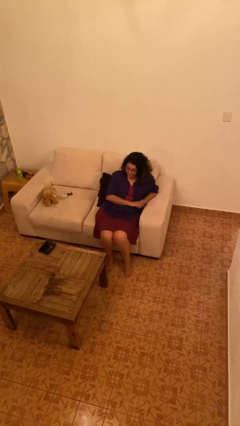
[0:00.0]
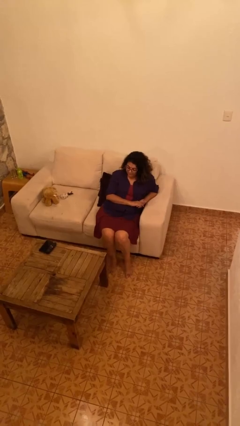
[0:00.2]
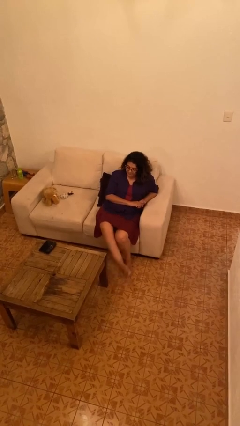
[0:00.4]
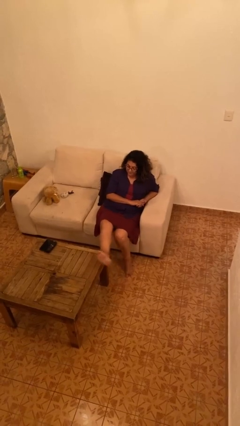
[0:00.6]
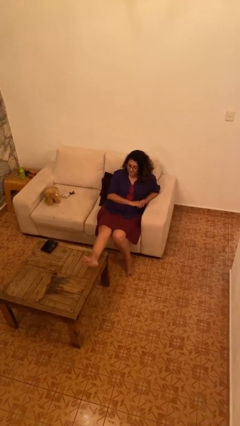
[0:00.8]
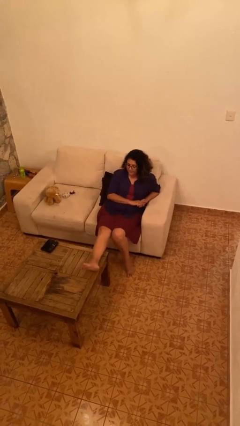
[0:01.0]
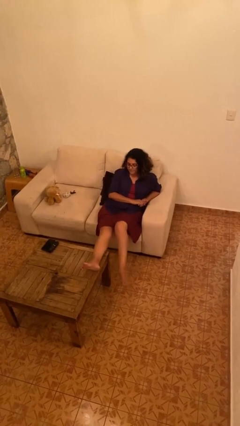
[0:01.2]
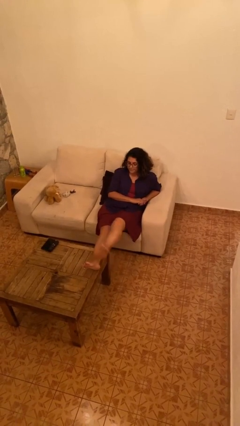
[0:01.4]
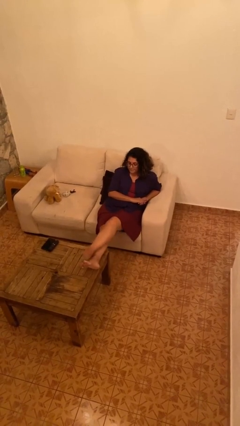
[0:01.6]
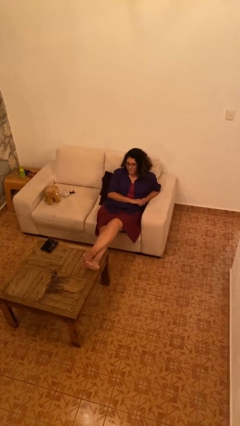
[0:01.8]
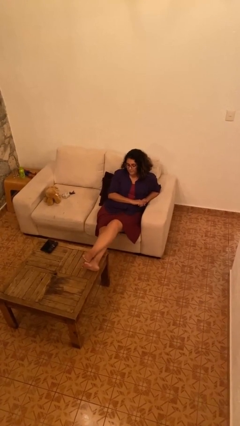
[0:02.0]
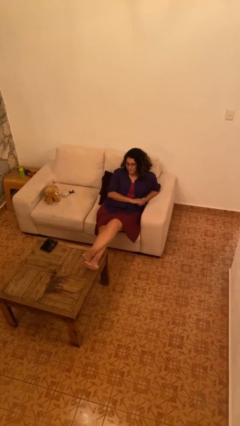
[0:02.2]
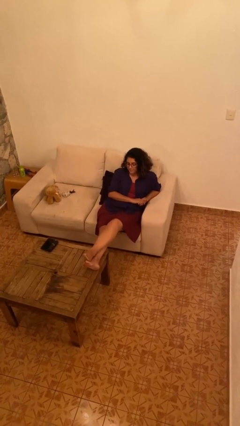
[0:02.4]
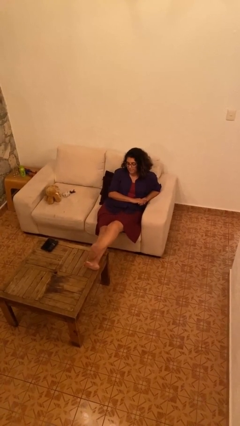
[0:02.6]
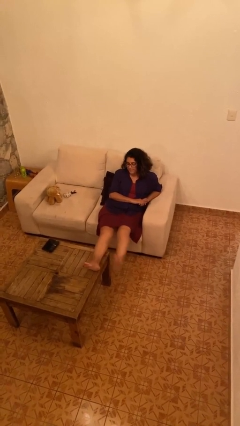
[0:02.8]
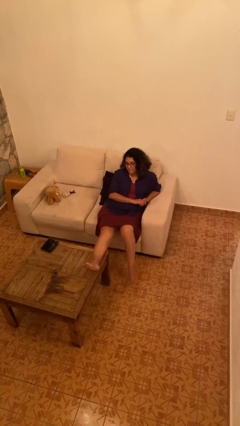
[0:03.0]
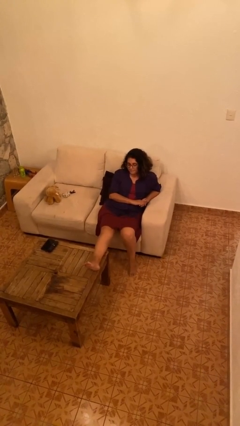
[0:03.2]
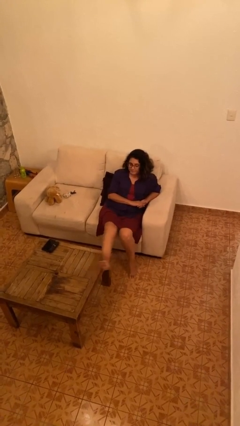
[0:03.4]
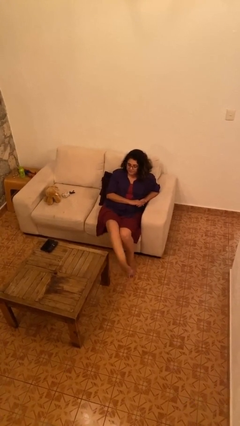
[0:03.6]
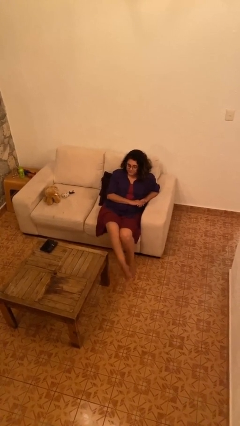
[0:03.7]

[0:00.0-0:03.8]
person puts feet up

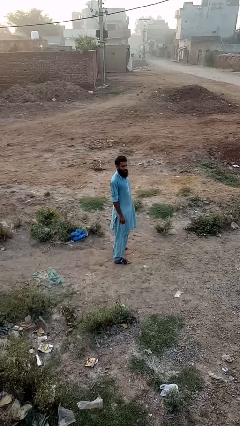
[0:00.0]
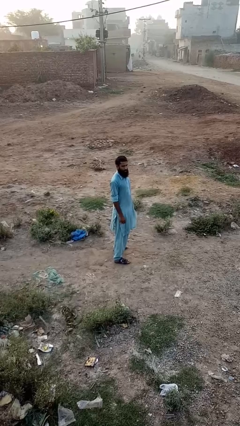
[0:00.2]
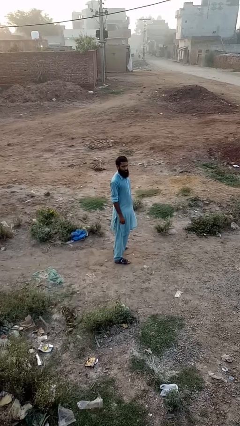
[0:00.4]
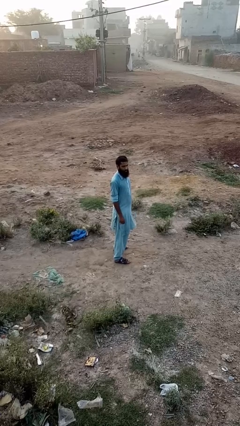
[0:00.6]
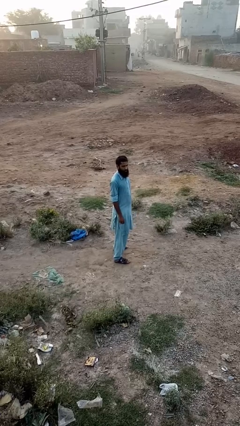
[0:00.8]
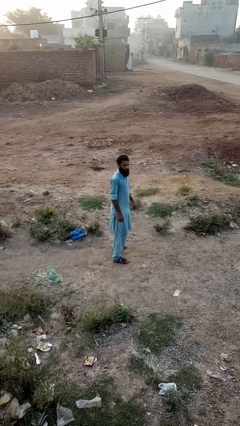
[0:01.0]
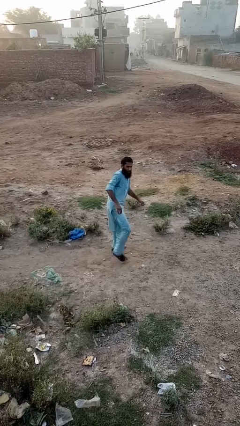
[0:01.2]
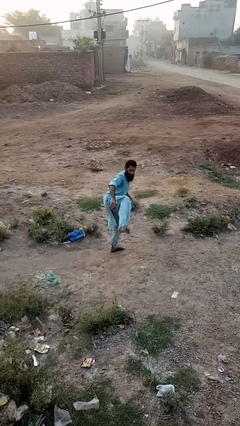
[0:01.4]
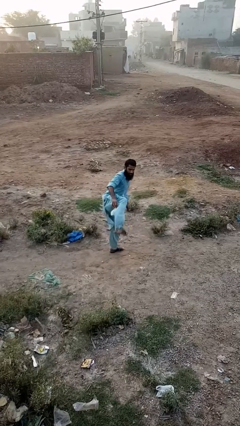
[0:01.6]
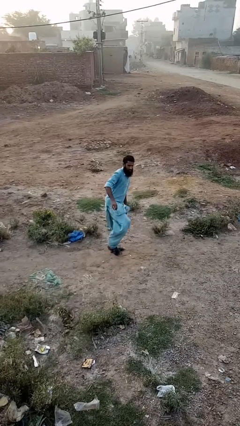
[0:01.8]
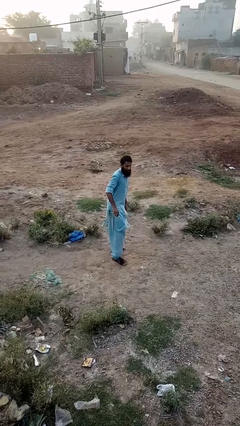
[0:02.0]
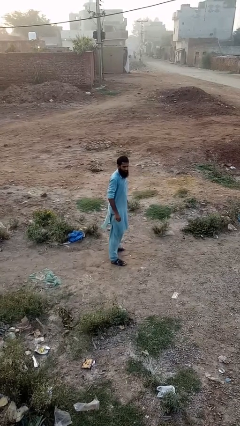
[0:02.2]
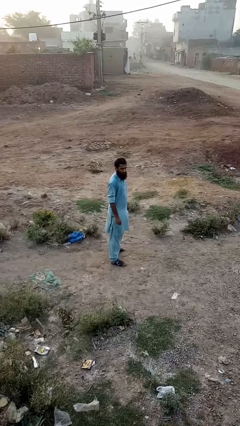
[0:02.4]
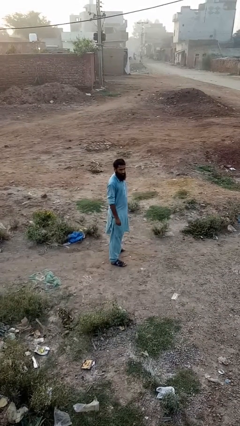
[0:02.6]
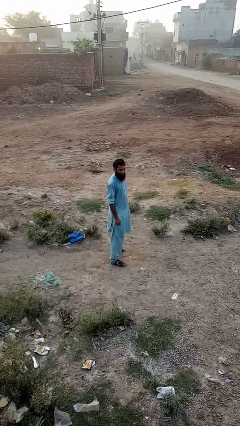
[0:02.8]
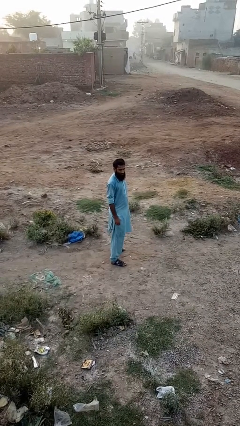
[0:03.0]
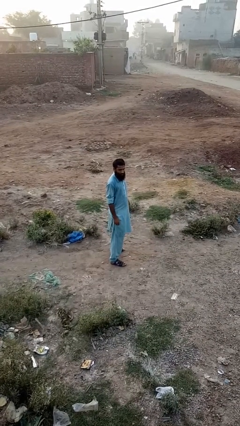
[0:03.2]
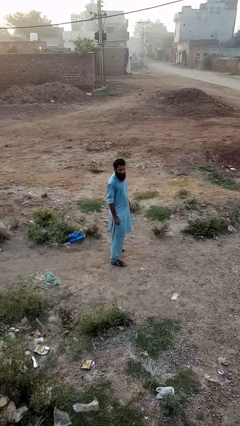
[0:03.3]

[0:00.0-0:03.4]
person karate kicks

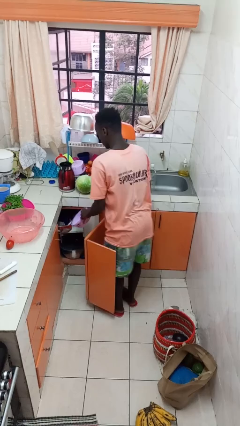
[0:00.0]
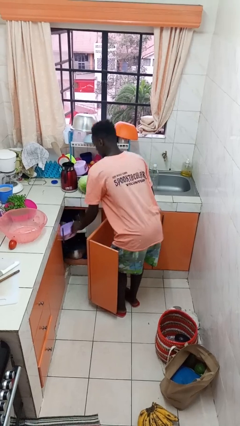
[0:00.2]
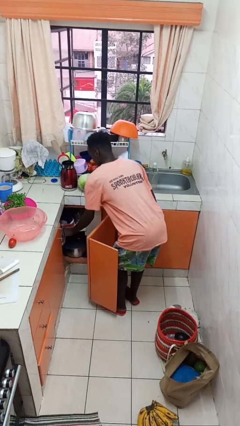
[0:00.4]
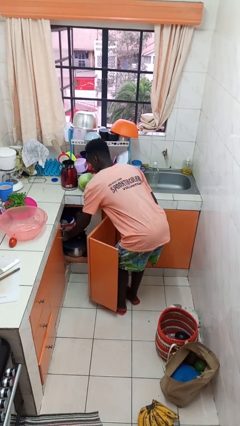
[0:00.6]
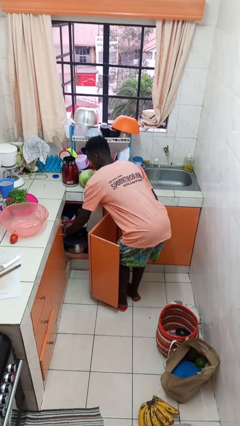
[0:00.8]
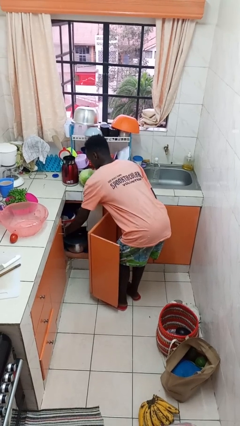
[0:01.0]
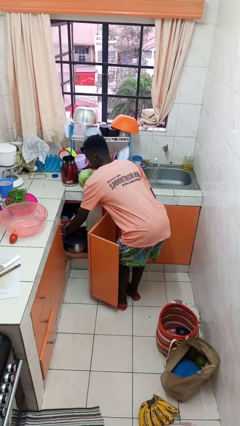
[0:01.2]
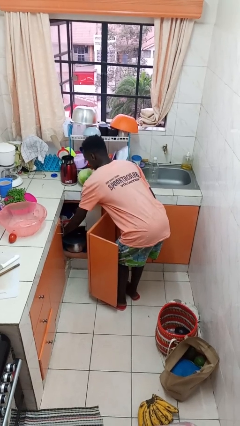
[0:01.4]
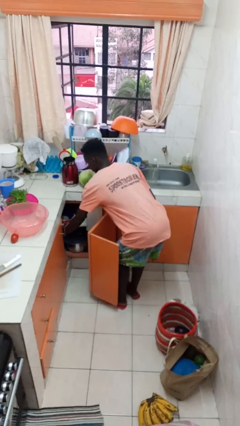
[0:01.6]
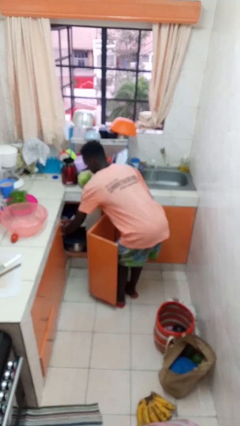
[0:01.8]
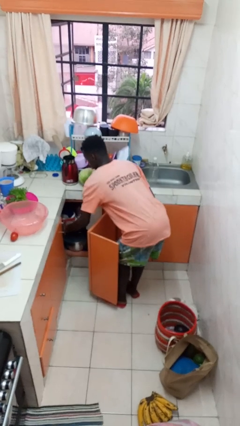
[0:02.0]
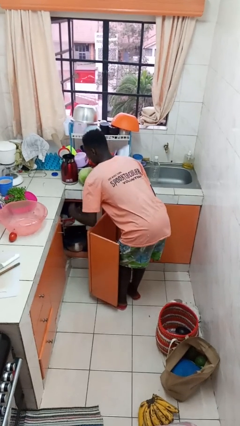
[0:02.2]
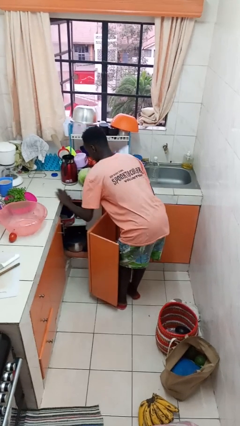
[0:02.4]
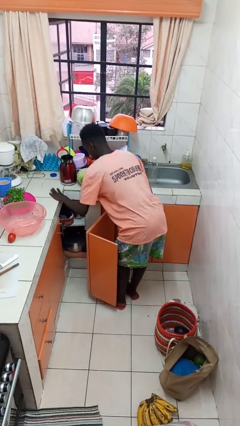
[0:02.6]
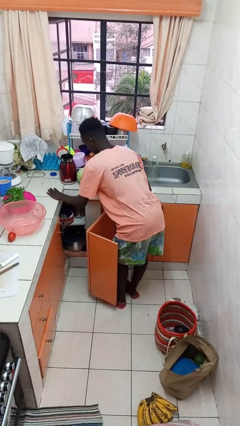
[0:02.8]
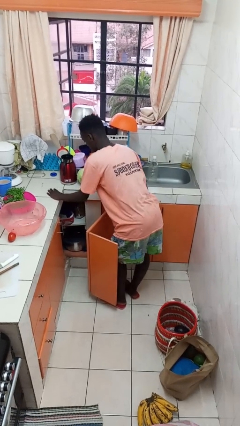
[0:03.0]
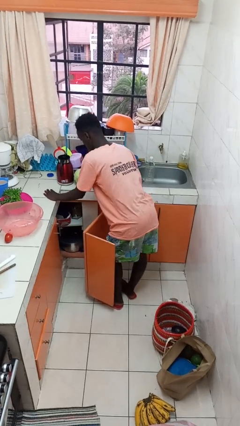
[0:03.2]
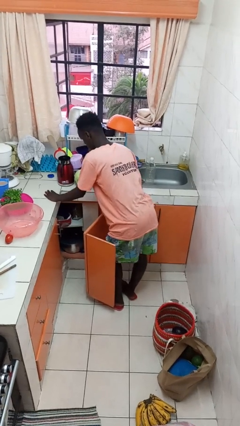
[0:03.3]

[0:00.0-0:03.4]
person puts object in cabinet

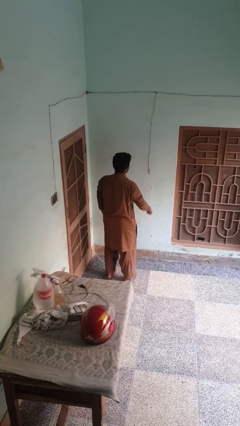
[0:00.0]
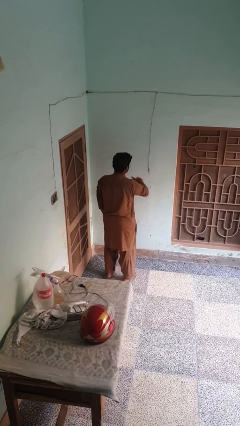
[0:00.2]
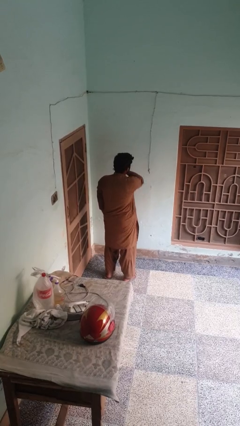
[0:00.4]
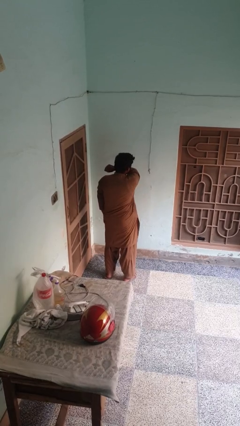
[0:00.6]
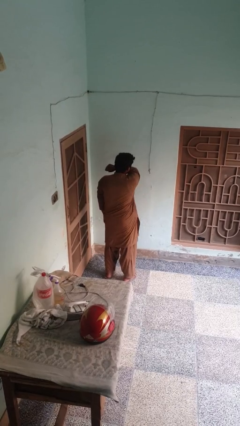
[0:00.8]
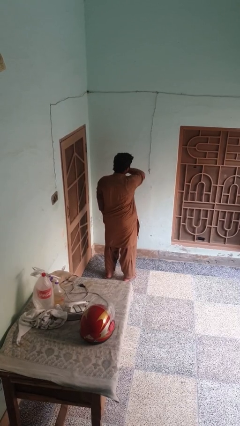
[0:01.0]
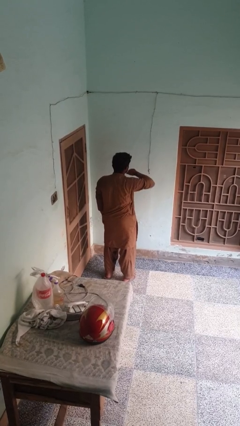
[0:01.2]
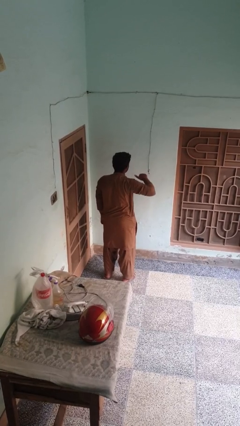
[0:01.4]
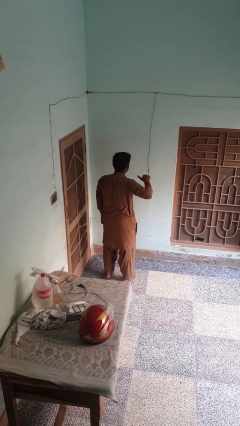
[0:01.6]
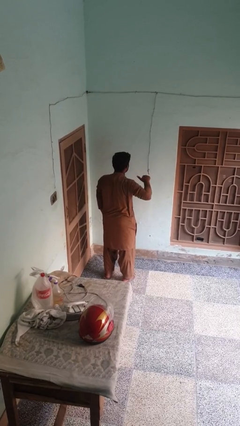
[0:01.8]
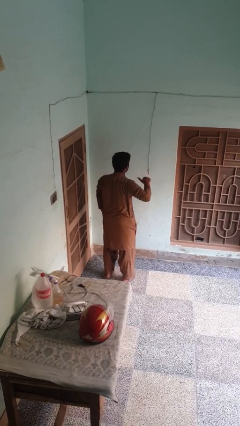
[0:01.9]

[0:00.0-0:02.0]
person gestures cut

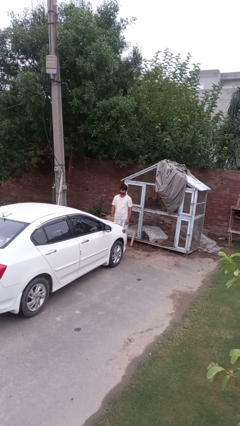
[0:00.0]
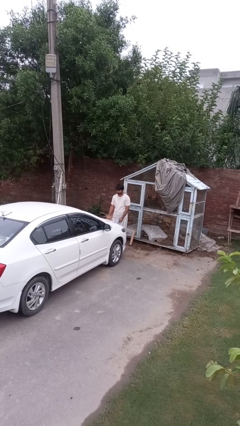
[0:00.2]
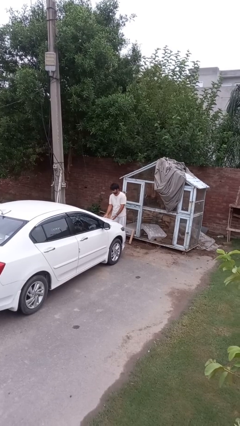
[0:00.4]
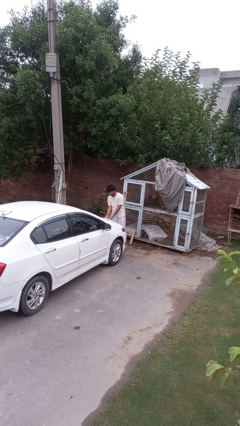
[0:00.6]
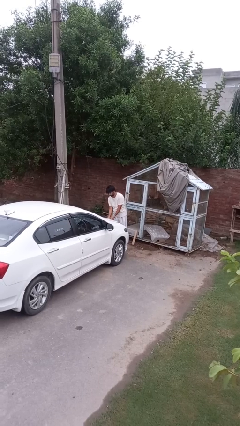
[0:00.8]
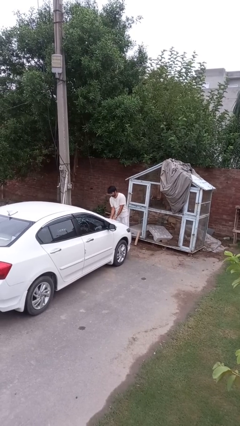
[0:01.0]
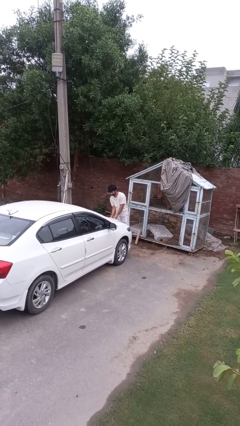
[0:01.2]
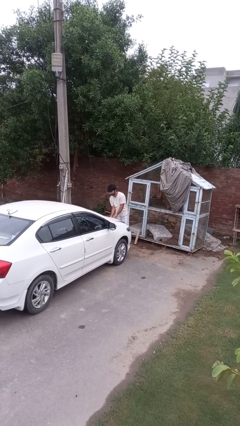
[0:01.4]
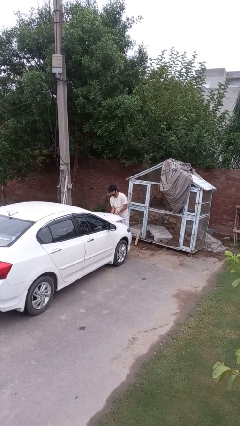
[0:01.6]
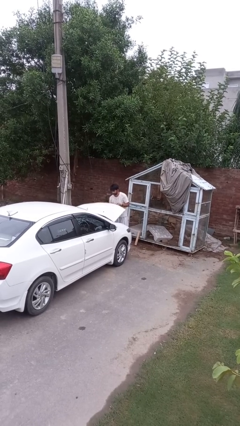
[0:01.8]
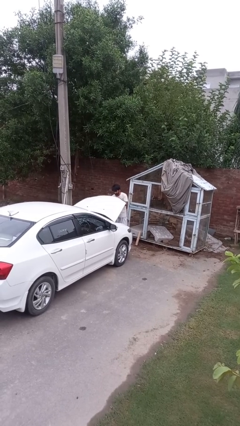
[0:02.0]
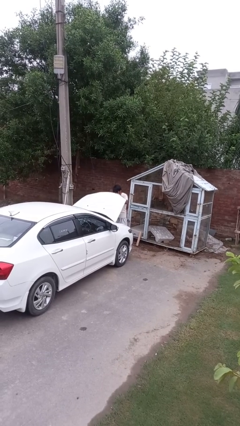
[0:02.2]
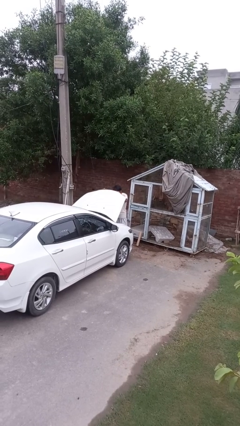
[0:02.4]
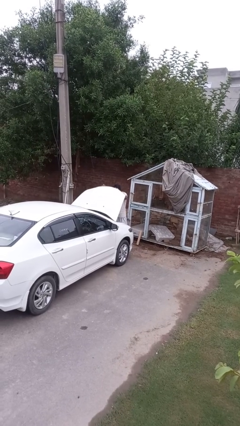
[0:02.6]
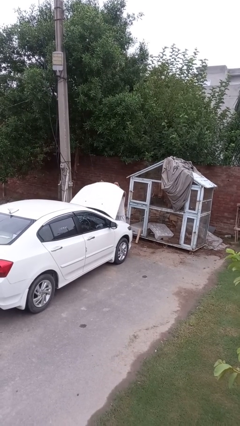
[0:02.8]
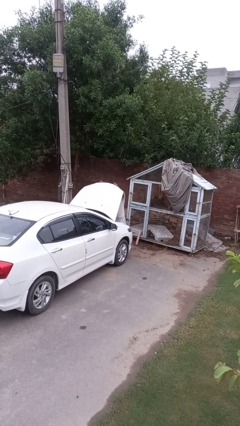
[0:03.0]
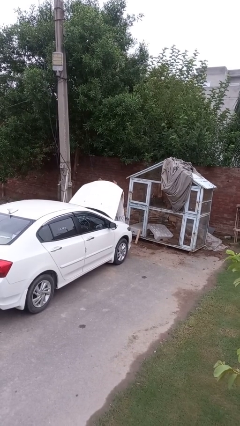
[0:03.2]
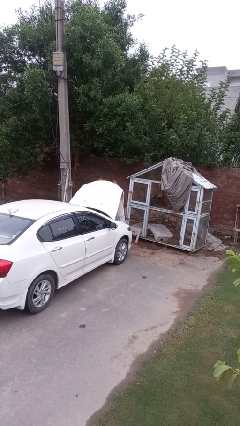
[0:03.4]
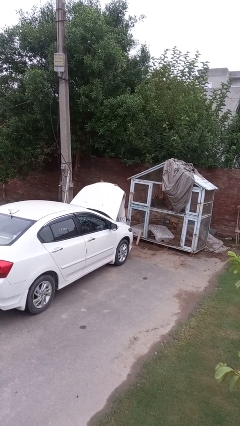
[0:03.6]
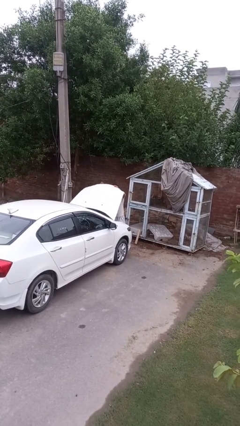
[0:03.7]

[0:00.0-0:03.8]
person opens car hood

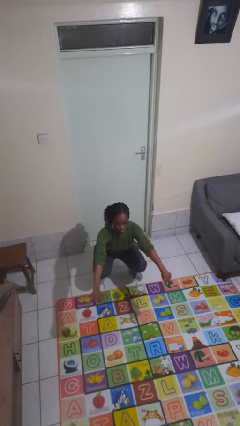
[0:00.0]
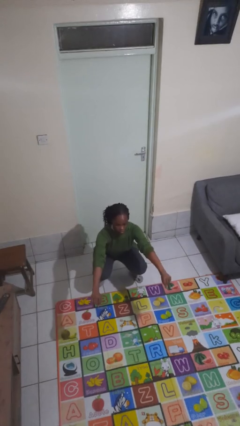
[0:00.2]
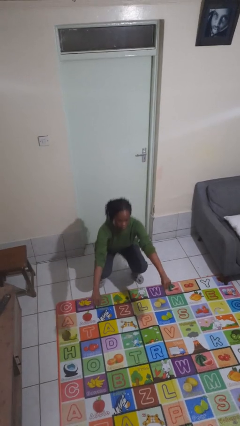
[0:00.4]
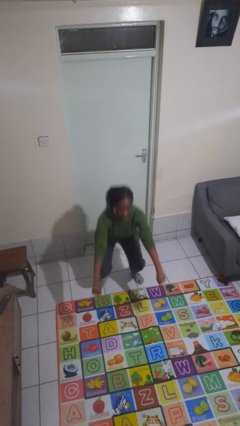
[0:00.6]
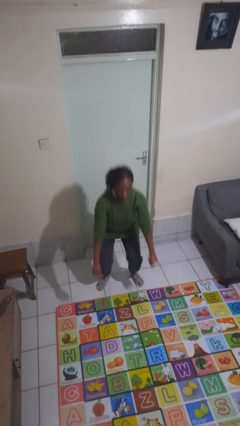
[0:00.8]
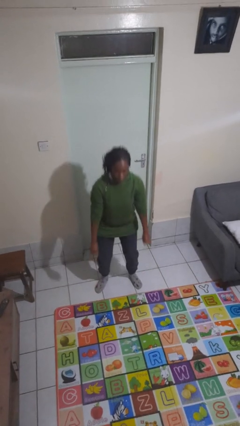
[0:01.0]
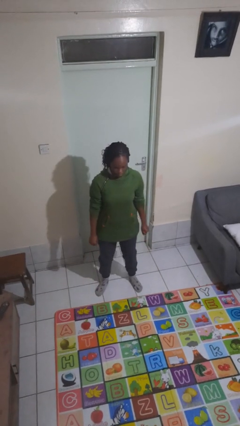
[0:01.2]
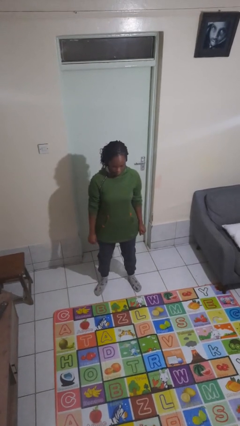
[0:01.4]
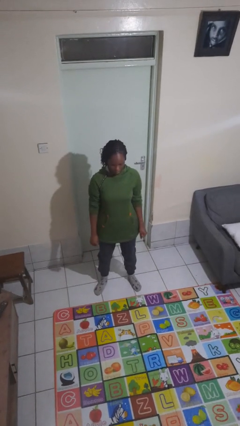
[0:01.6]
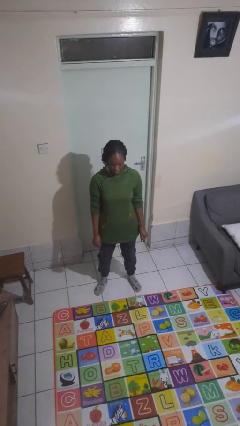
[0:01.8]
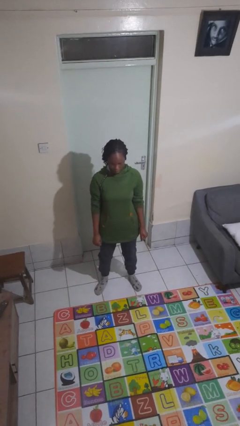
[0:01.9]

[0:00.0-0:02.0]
person stands up
